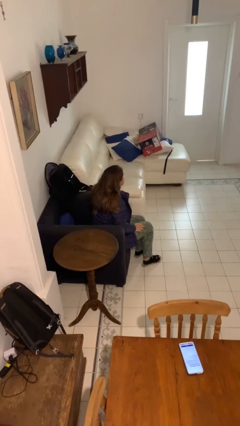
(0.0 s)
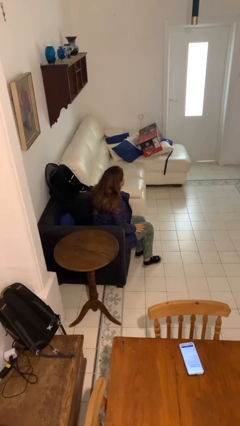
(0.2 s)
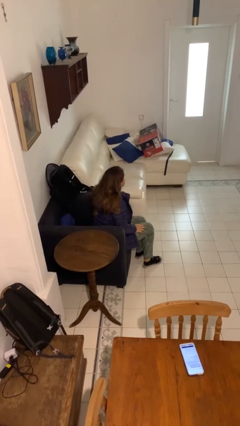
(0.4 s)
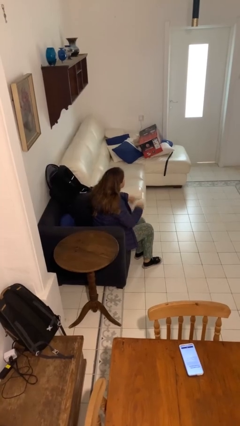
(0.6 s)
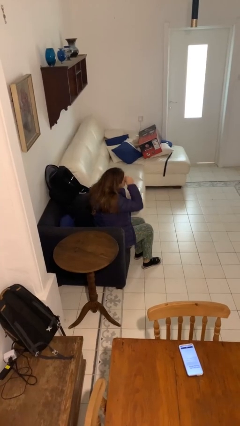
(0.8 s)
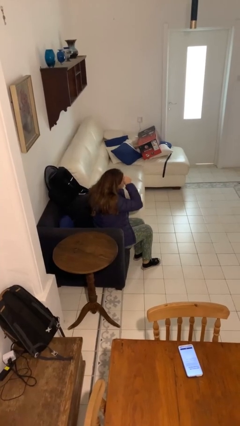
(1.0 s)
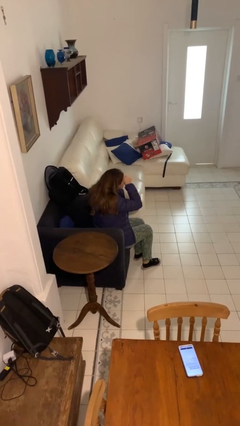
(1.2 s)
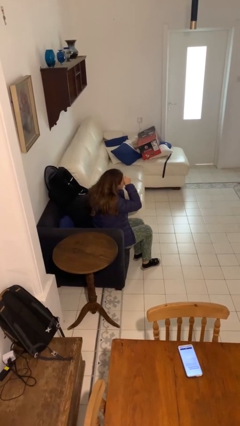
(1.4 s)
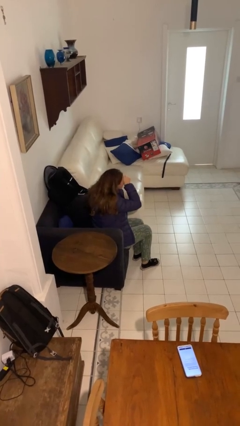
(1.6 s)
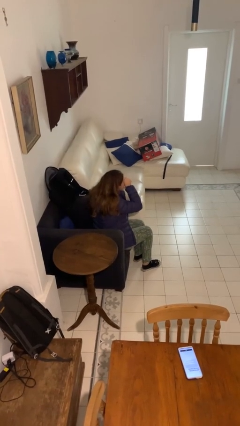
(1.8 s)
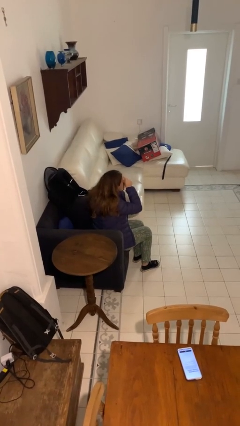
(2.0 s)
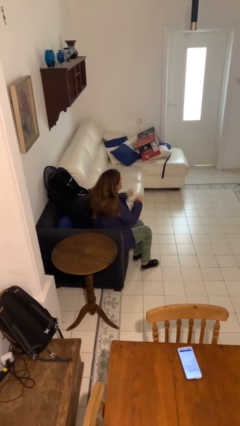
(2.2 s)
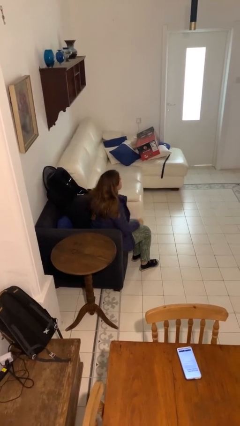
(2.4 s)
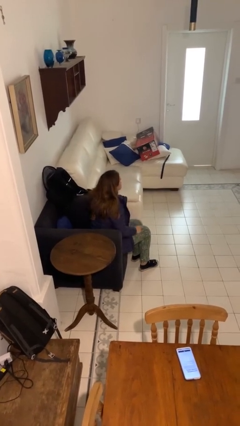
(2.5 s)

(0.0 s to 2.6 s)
person rubs eyes

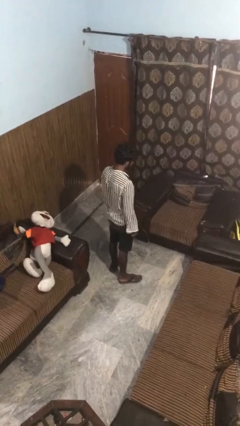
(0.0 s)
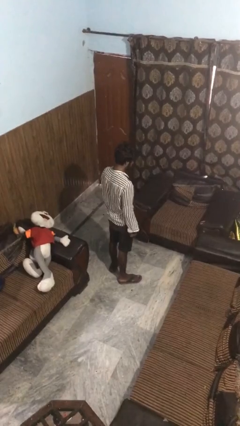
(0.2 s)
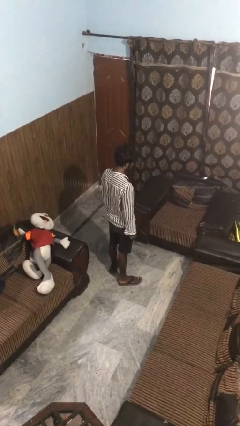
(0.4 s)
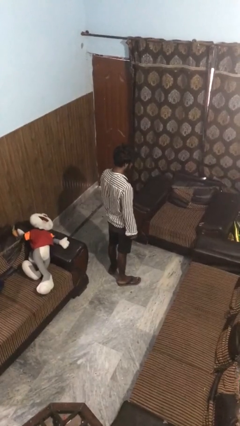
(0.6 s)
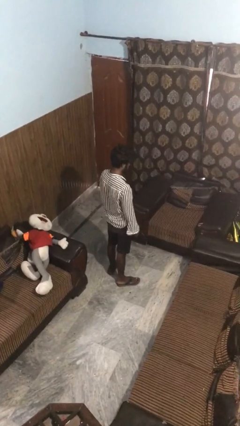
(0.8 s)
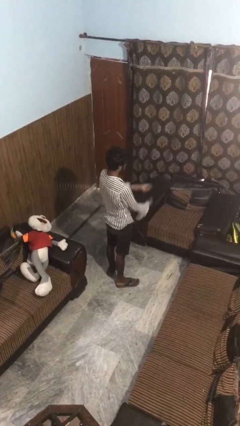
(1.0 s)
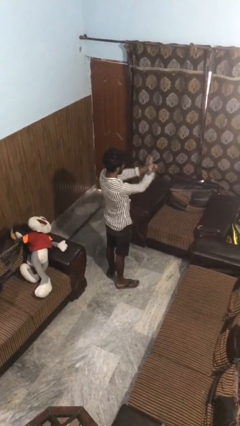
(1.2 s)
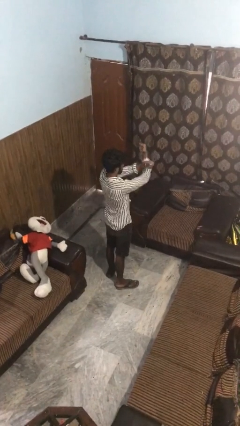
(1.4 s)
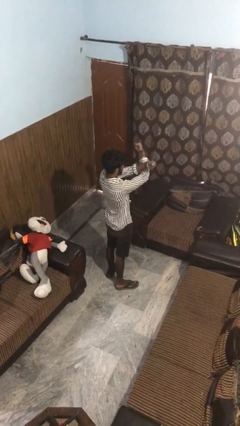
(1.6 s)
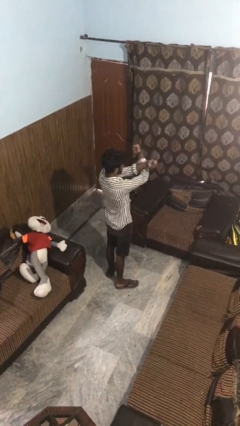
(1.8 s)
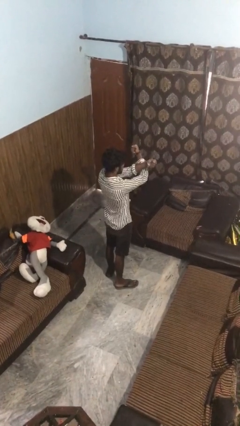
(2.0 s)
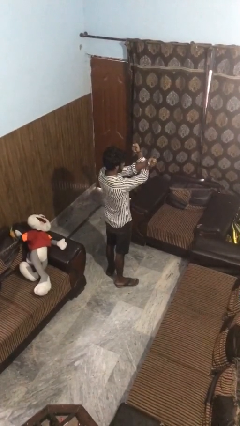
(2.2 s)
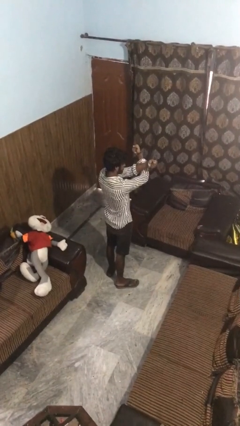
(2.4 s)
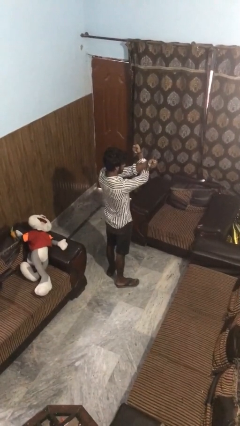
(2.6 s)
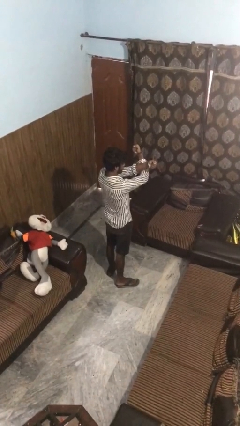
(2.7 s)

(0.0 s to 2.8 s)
person gestures arms x

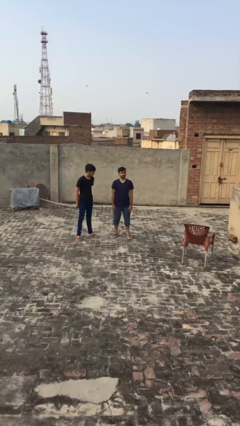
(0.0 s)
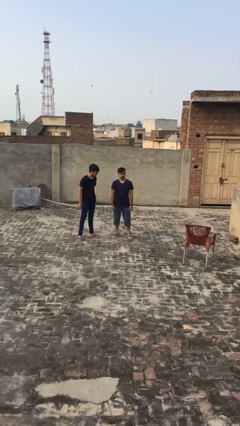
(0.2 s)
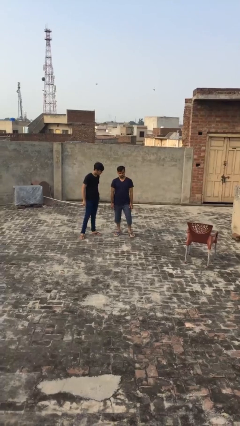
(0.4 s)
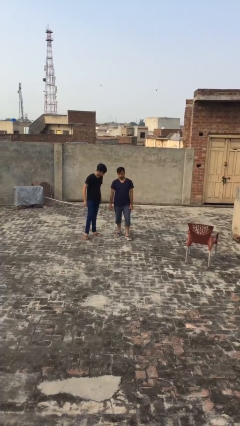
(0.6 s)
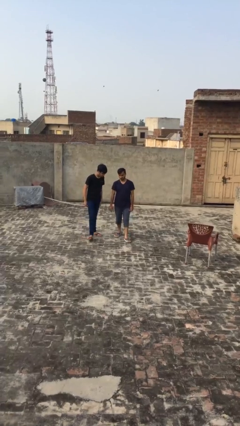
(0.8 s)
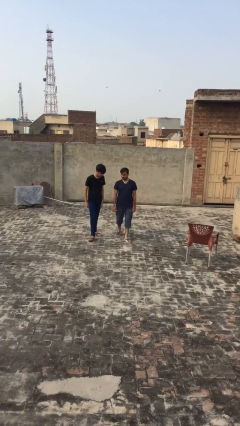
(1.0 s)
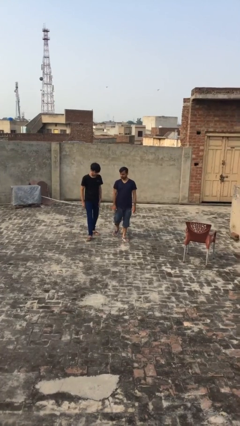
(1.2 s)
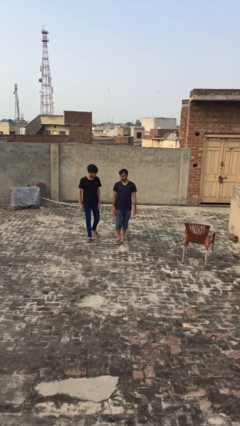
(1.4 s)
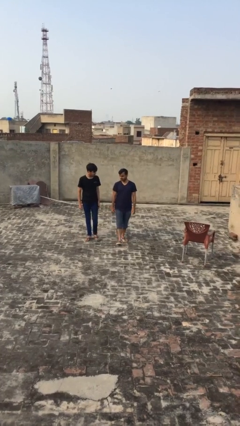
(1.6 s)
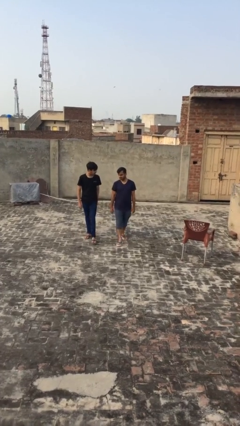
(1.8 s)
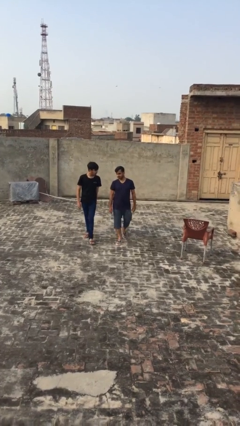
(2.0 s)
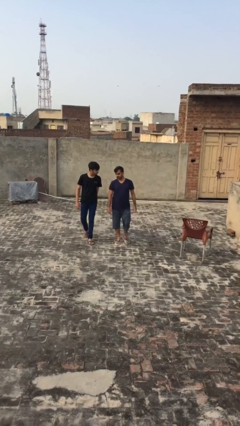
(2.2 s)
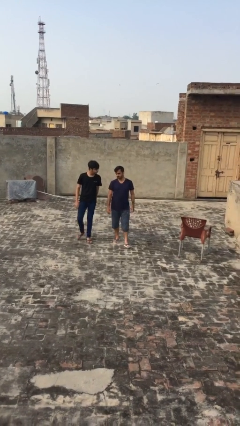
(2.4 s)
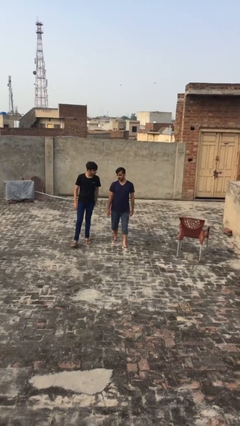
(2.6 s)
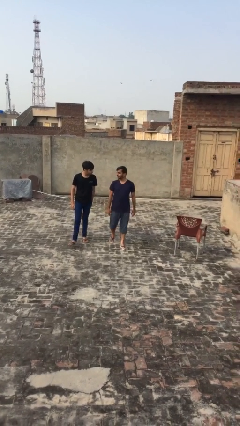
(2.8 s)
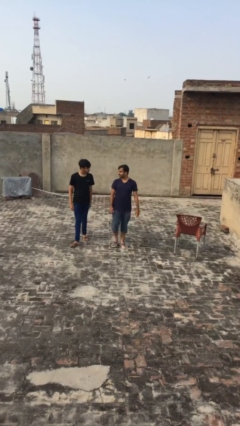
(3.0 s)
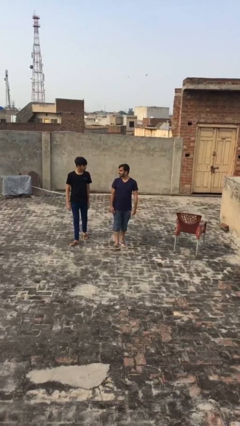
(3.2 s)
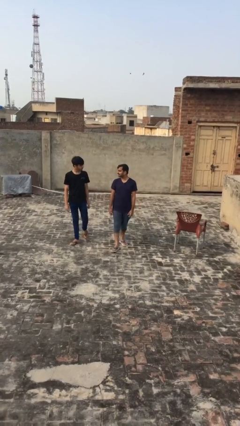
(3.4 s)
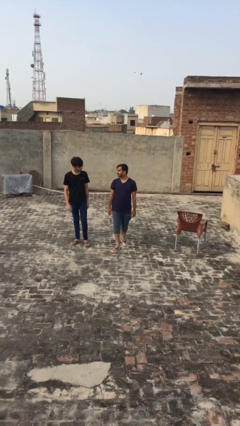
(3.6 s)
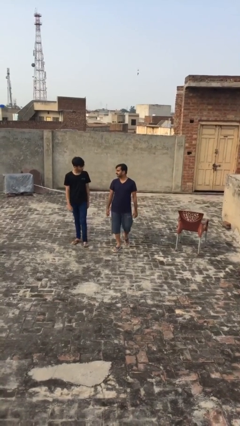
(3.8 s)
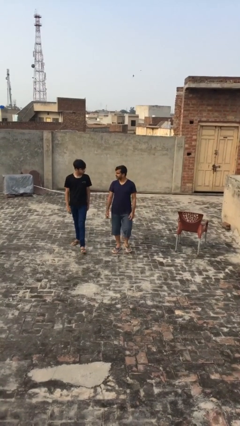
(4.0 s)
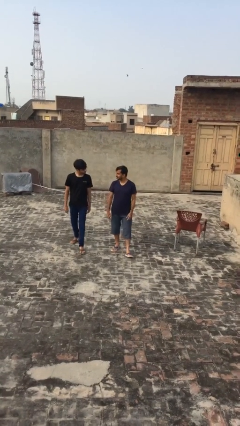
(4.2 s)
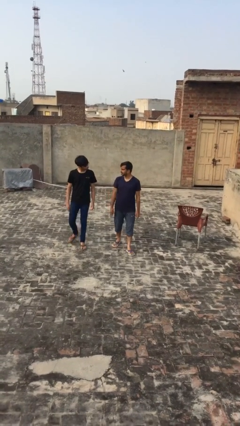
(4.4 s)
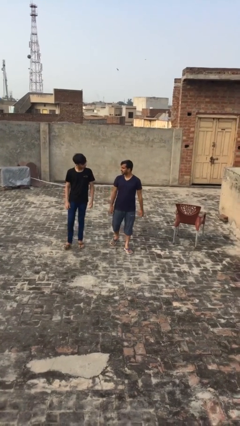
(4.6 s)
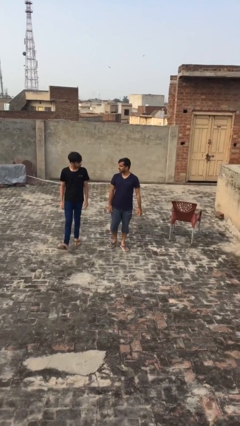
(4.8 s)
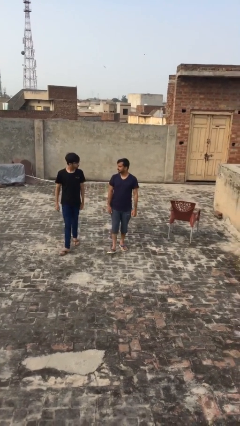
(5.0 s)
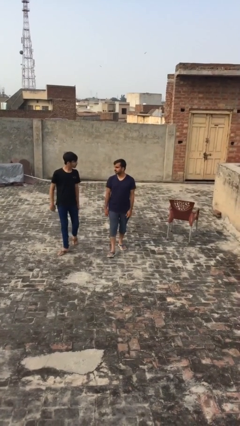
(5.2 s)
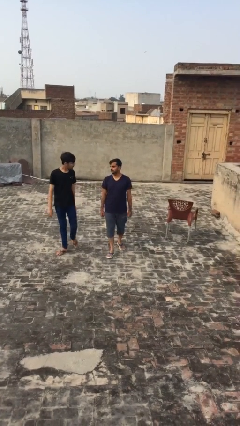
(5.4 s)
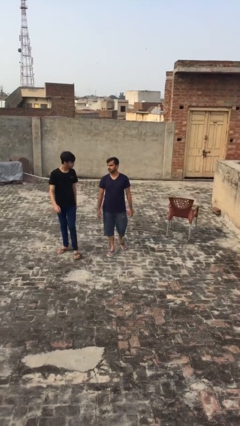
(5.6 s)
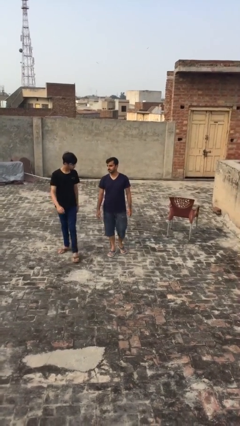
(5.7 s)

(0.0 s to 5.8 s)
person talks to person

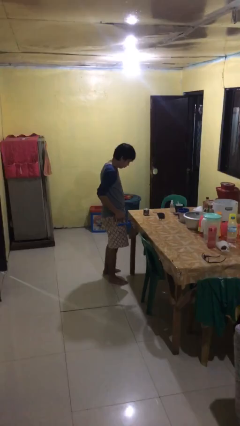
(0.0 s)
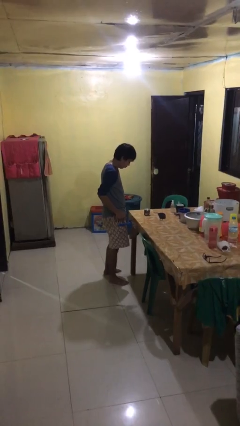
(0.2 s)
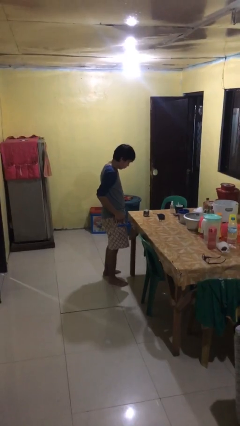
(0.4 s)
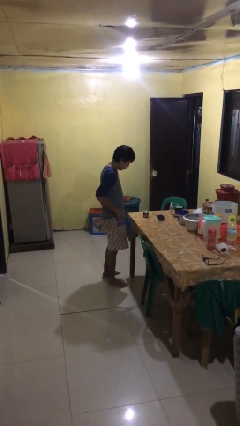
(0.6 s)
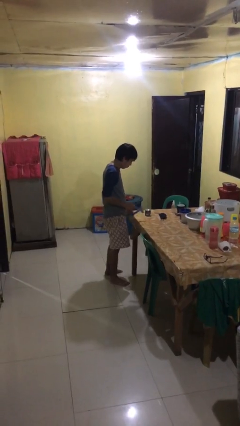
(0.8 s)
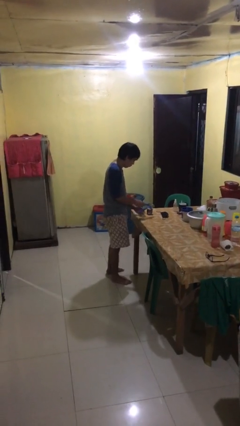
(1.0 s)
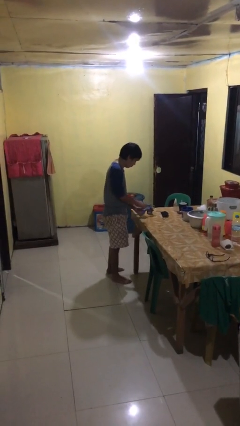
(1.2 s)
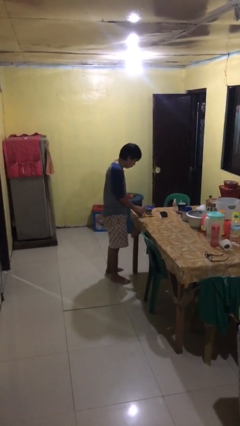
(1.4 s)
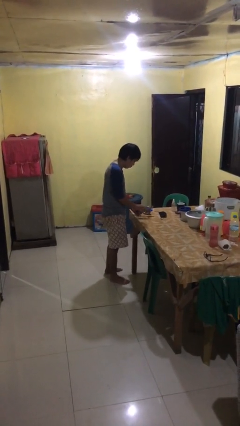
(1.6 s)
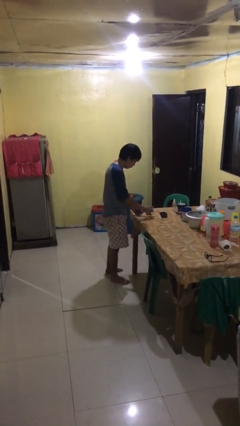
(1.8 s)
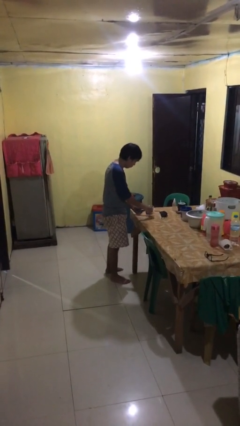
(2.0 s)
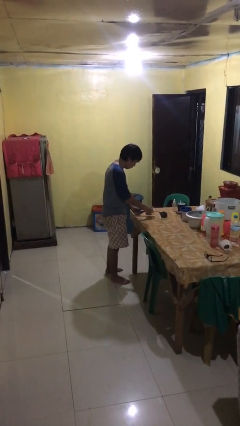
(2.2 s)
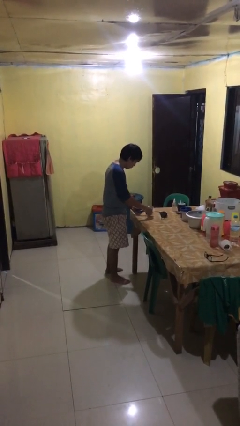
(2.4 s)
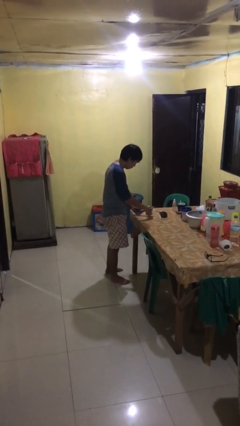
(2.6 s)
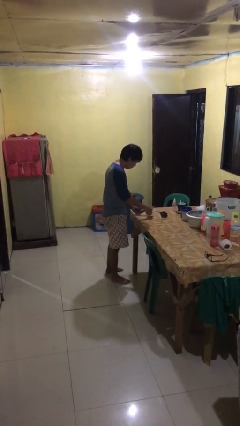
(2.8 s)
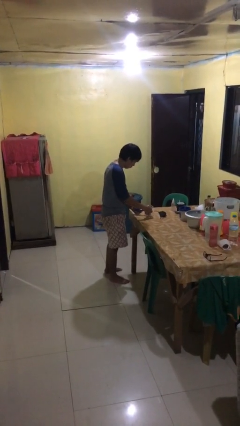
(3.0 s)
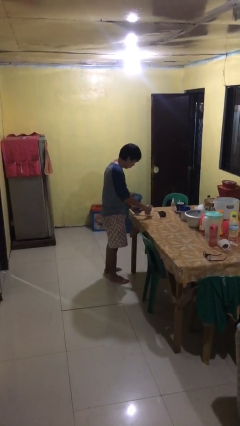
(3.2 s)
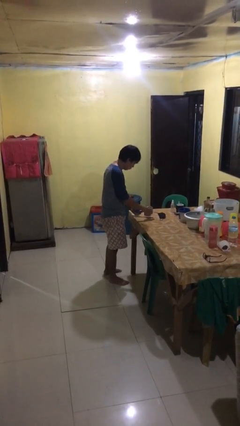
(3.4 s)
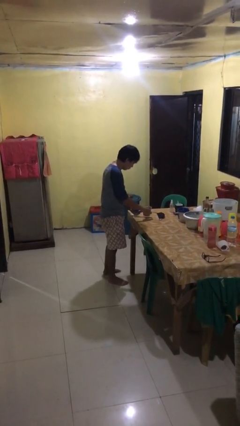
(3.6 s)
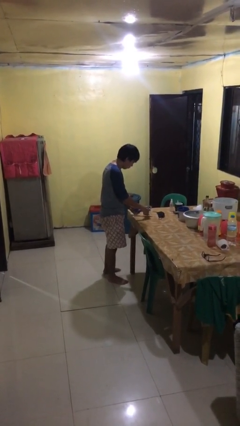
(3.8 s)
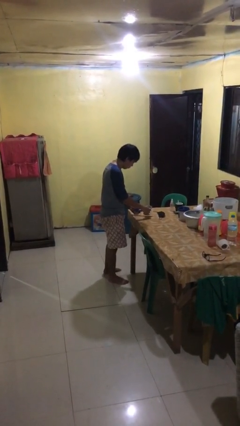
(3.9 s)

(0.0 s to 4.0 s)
person opens can with can opener

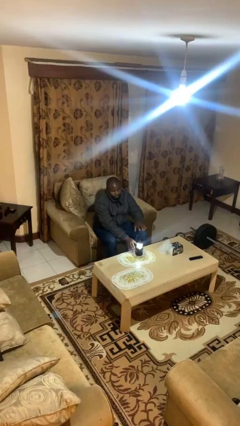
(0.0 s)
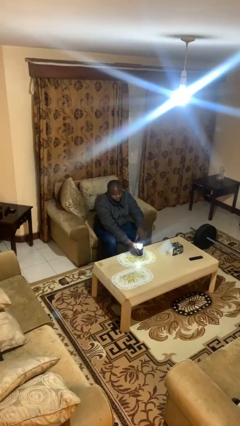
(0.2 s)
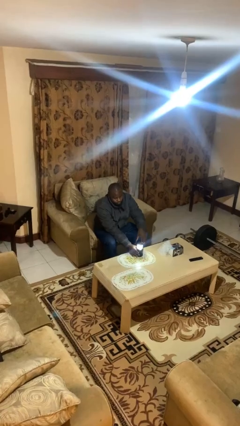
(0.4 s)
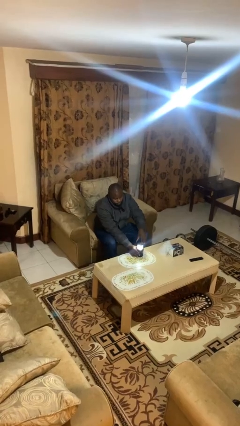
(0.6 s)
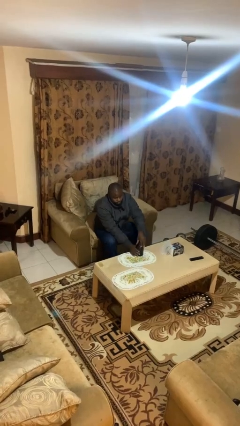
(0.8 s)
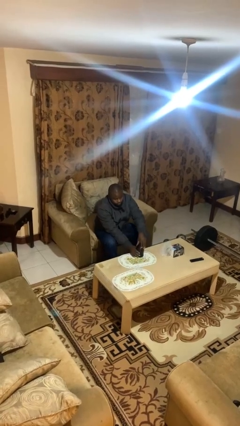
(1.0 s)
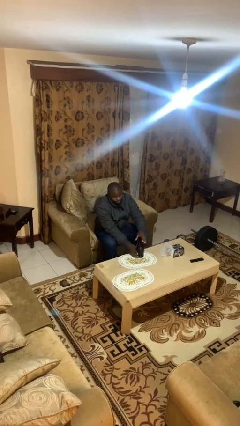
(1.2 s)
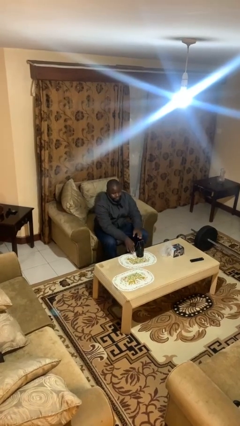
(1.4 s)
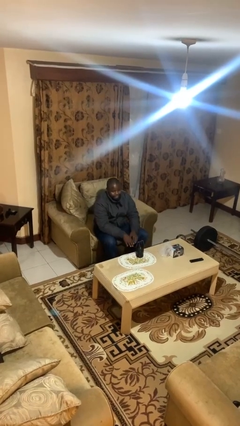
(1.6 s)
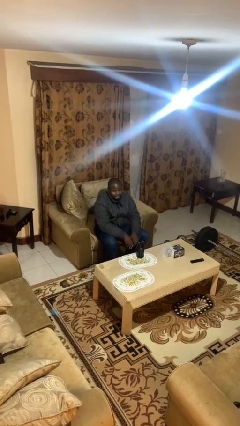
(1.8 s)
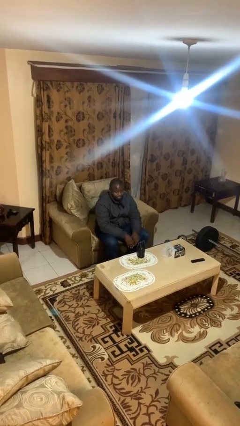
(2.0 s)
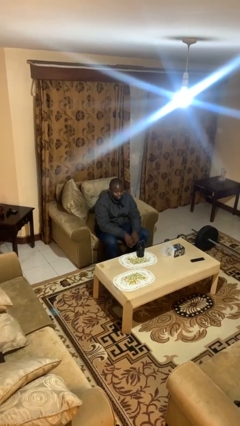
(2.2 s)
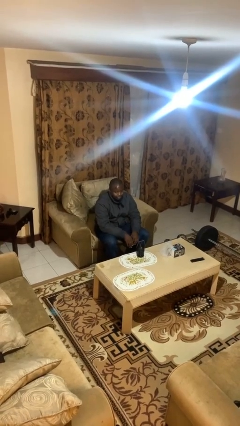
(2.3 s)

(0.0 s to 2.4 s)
person turns off lamp

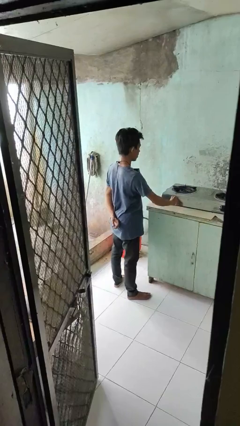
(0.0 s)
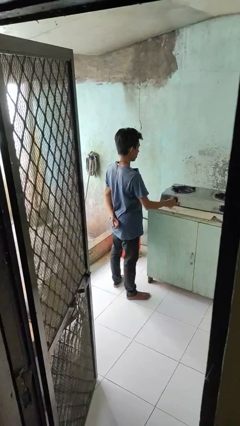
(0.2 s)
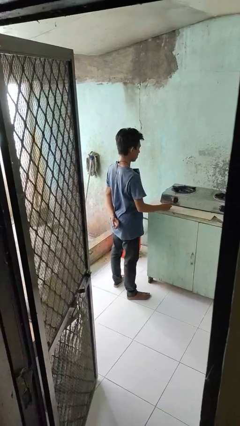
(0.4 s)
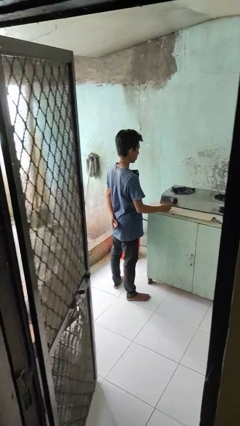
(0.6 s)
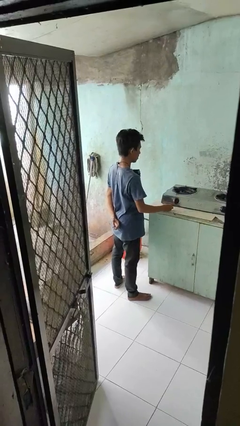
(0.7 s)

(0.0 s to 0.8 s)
person turns off stovetop
